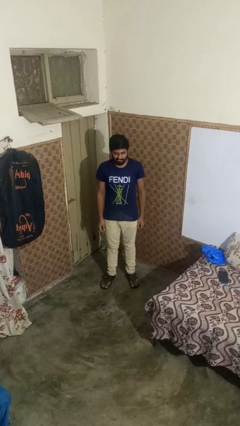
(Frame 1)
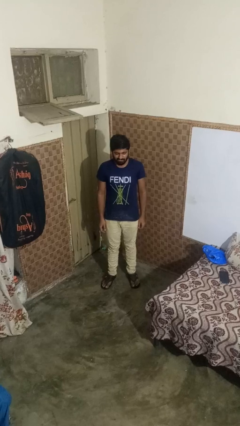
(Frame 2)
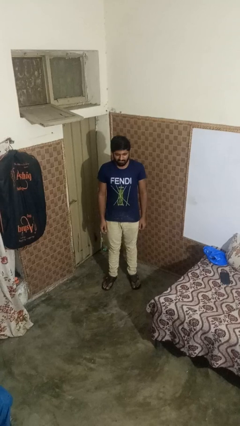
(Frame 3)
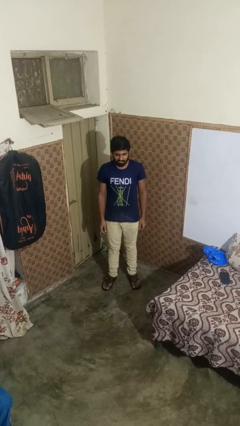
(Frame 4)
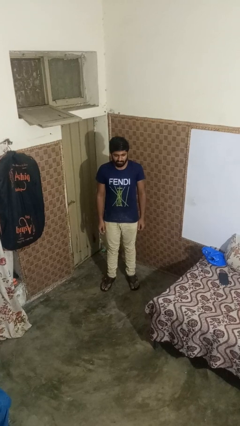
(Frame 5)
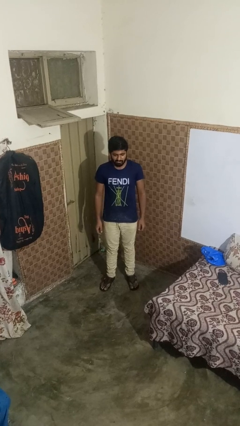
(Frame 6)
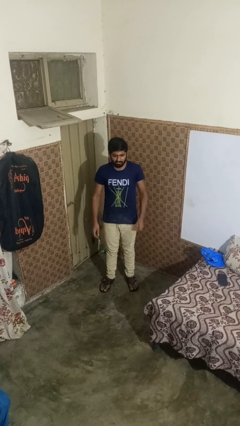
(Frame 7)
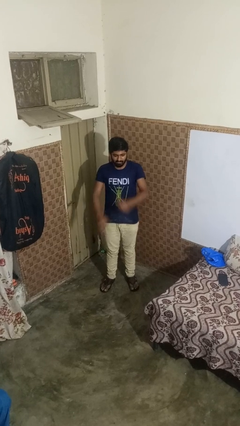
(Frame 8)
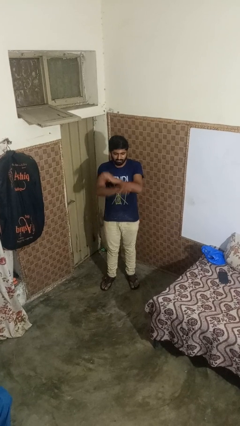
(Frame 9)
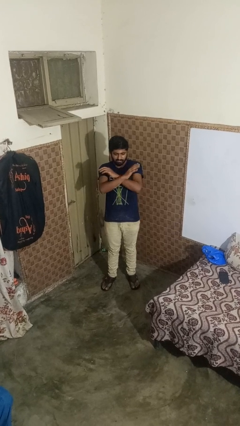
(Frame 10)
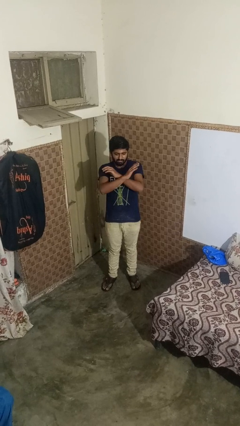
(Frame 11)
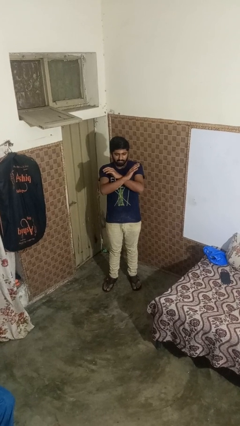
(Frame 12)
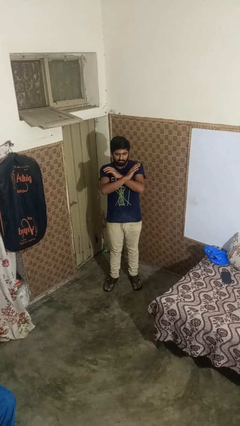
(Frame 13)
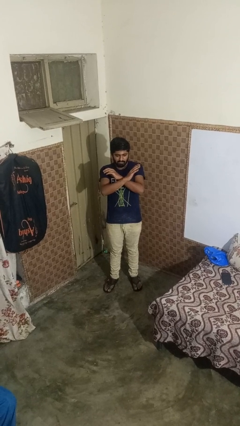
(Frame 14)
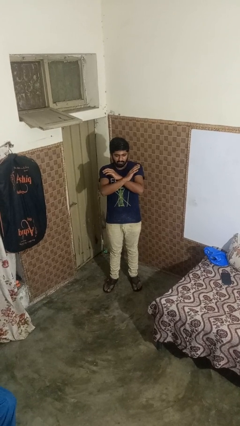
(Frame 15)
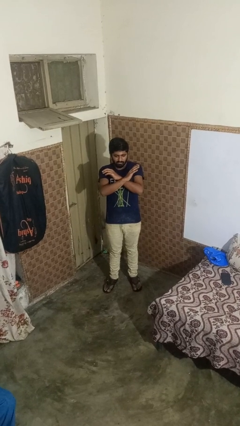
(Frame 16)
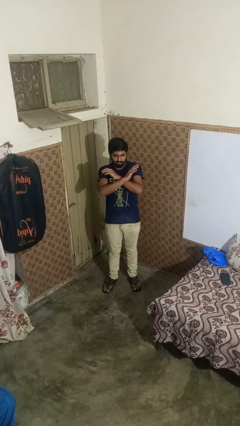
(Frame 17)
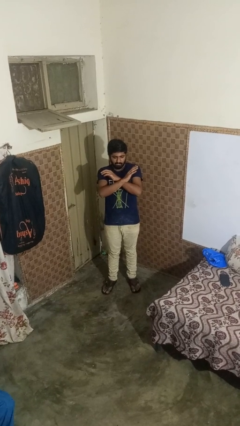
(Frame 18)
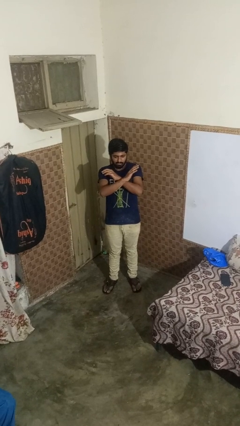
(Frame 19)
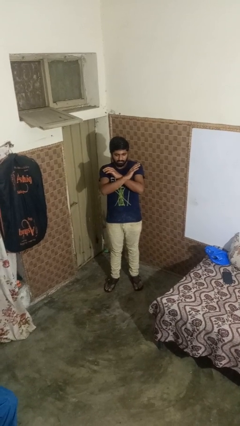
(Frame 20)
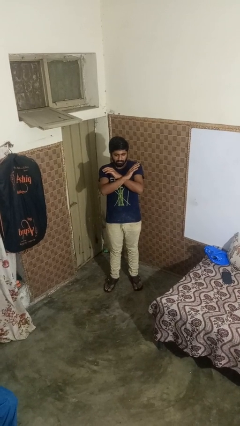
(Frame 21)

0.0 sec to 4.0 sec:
person gestures arms x

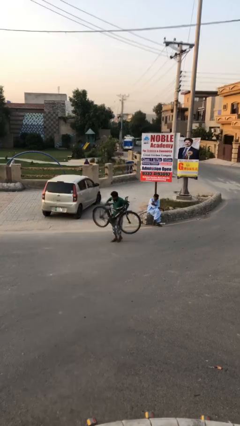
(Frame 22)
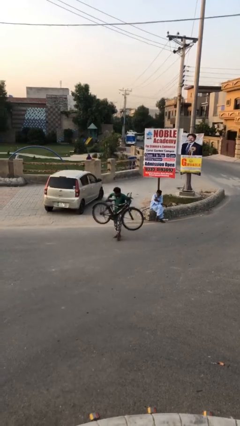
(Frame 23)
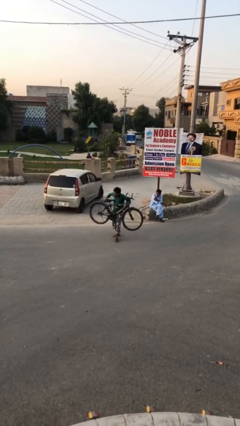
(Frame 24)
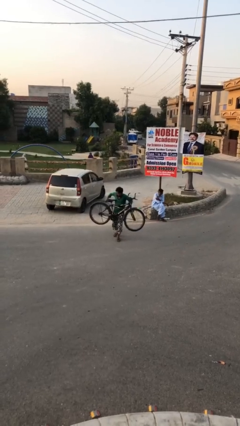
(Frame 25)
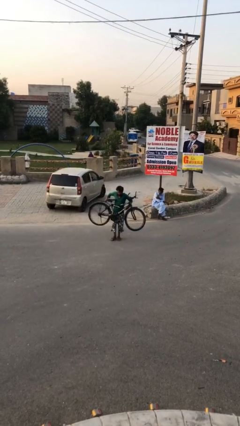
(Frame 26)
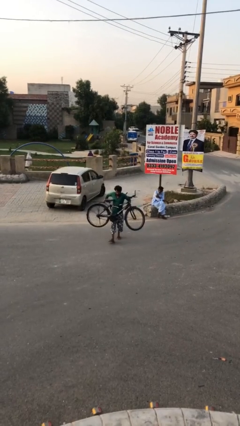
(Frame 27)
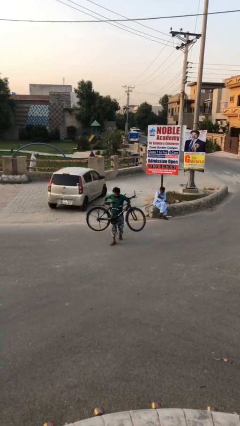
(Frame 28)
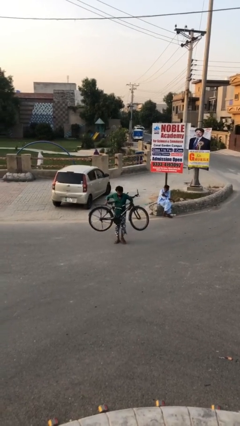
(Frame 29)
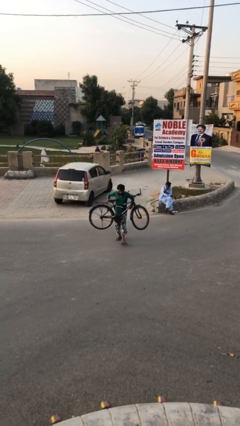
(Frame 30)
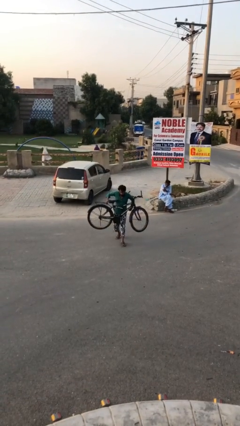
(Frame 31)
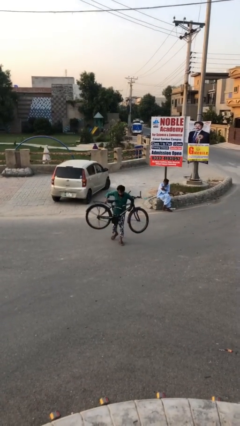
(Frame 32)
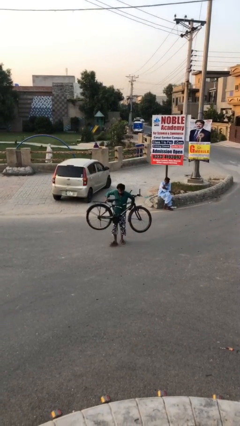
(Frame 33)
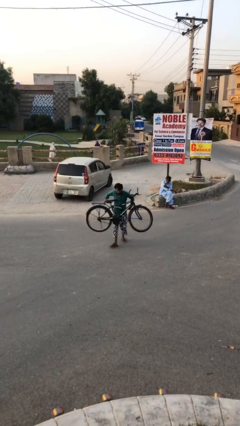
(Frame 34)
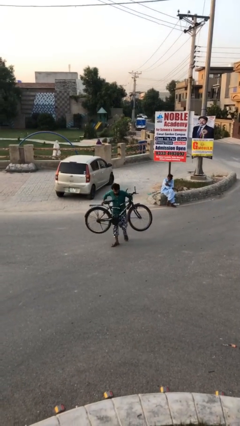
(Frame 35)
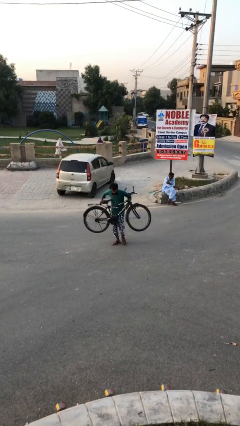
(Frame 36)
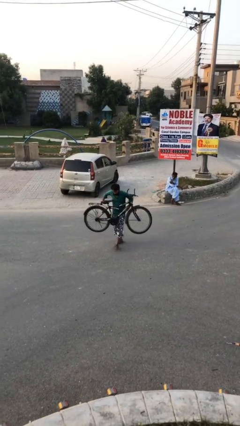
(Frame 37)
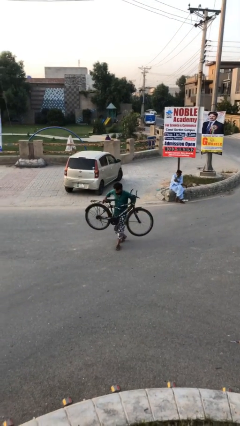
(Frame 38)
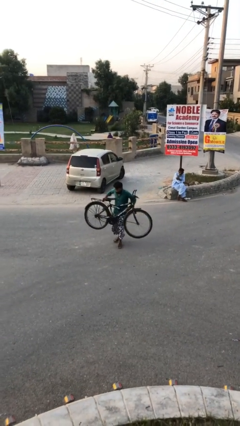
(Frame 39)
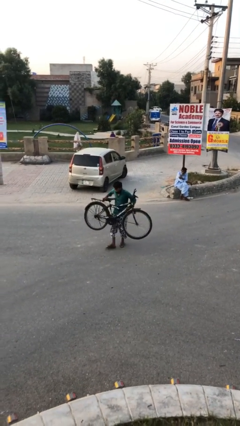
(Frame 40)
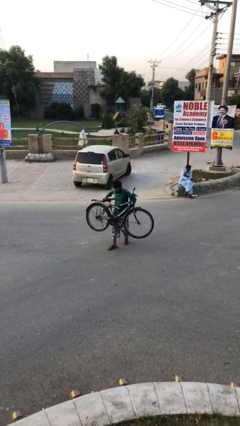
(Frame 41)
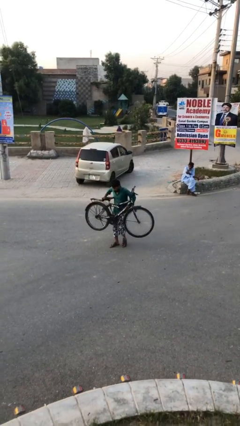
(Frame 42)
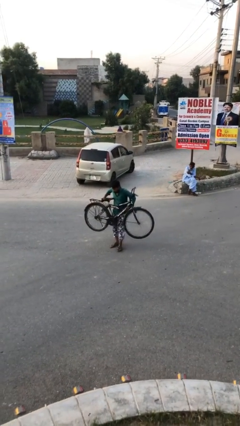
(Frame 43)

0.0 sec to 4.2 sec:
person carries heavy object

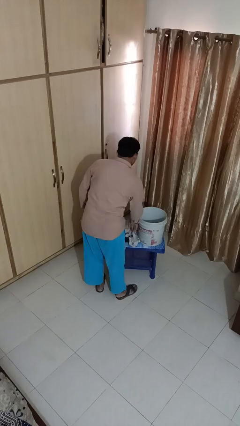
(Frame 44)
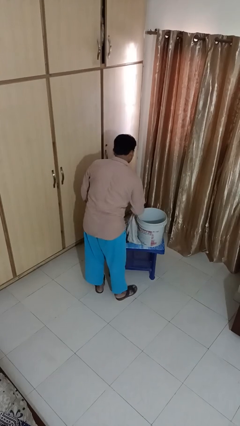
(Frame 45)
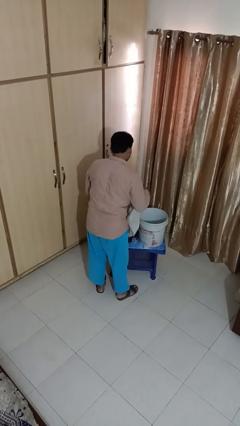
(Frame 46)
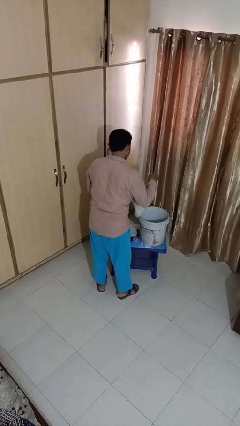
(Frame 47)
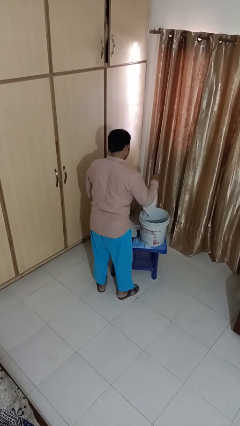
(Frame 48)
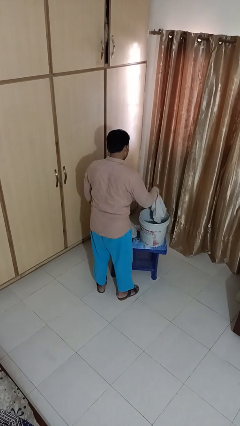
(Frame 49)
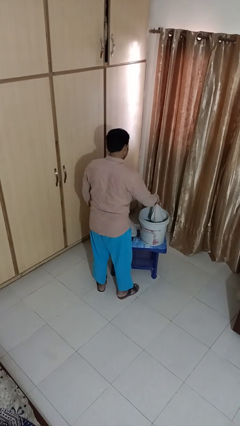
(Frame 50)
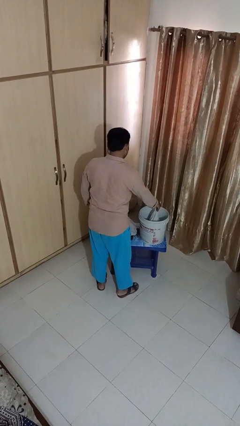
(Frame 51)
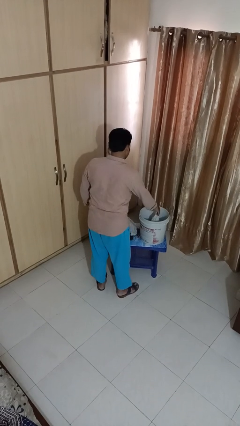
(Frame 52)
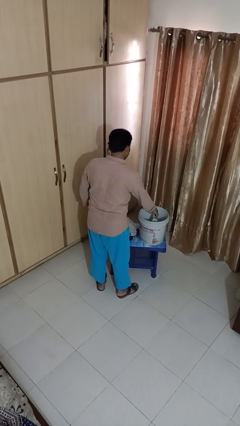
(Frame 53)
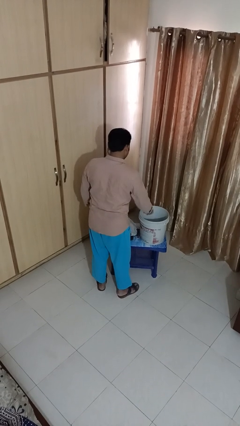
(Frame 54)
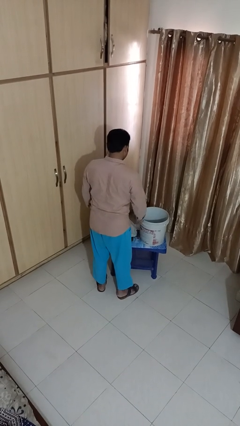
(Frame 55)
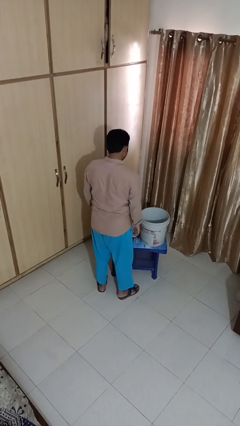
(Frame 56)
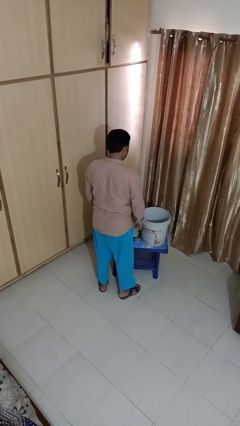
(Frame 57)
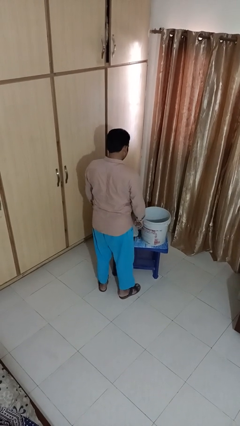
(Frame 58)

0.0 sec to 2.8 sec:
person puts object into basket

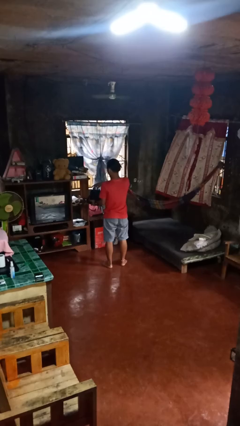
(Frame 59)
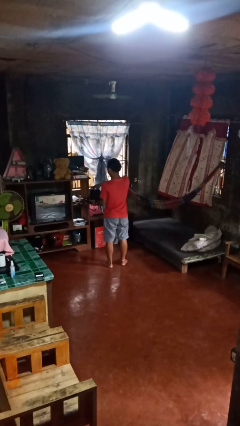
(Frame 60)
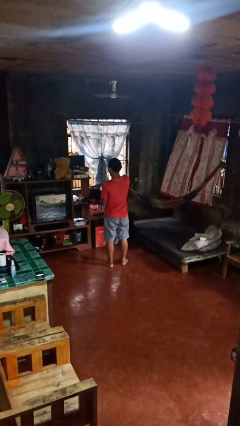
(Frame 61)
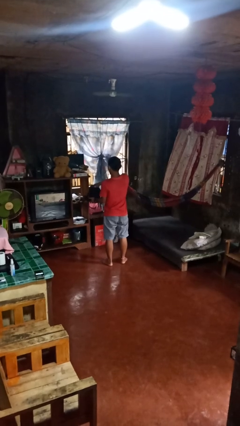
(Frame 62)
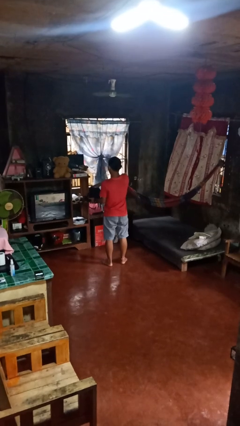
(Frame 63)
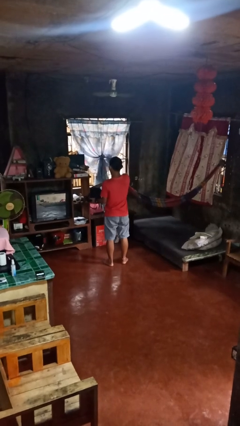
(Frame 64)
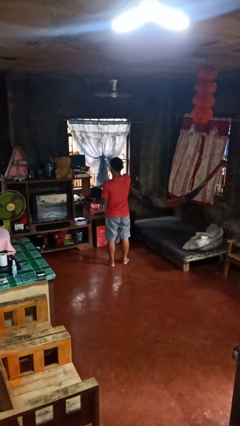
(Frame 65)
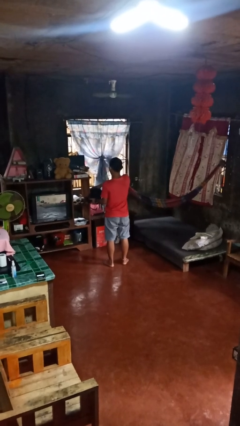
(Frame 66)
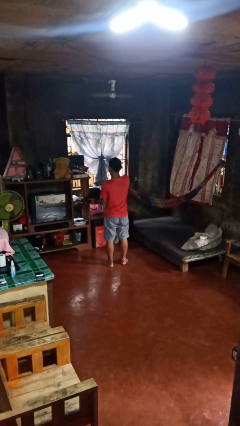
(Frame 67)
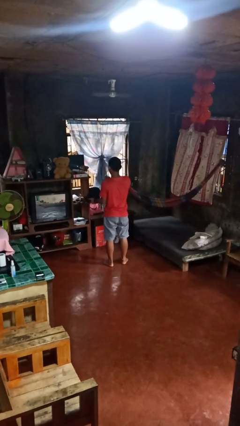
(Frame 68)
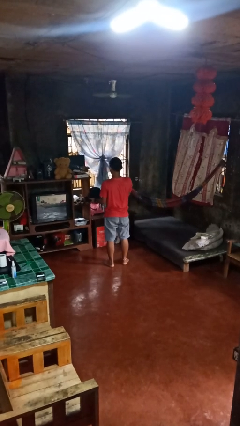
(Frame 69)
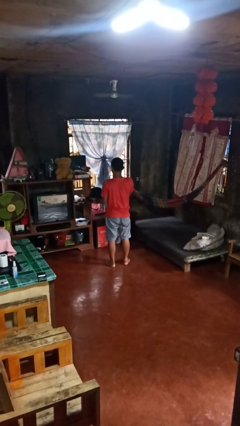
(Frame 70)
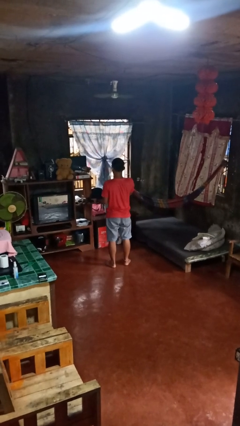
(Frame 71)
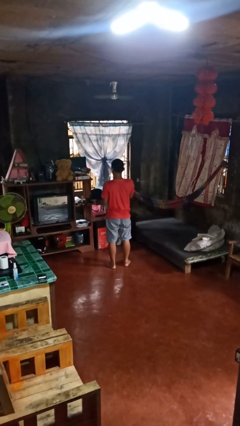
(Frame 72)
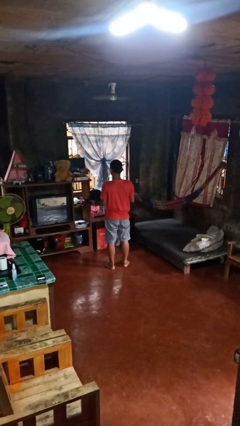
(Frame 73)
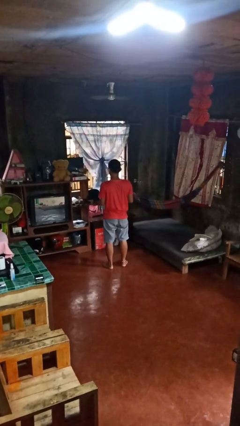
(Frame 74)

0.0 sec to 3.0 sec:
person eats snack from bag

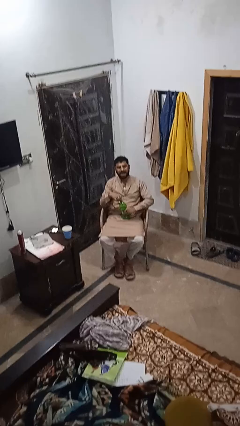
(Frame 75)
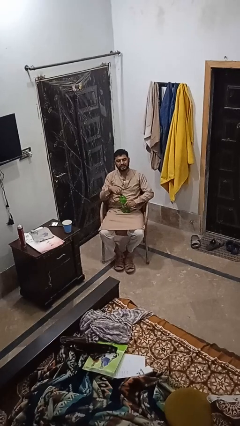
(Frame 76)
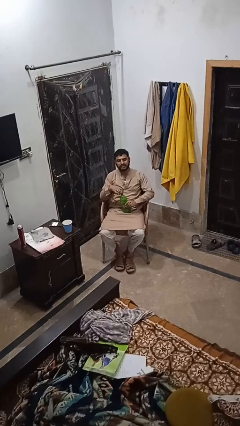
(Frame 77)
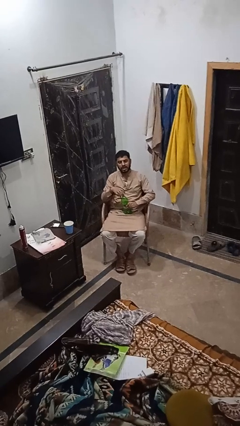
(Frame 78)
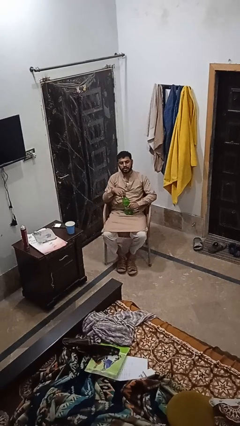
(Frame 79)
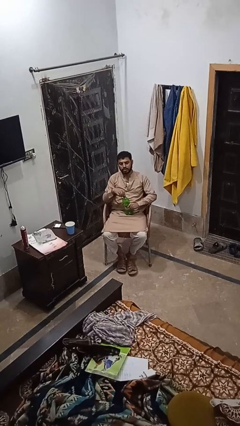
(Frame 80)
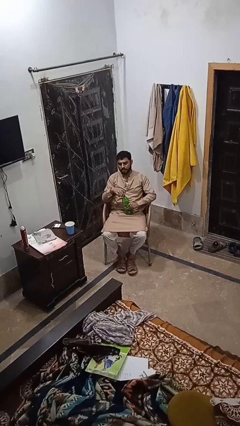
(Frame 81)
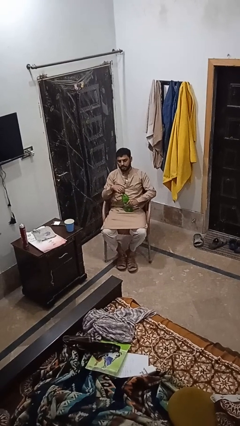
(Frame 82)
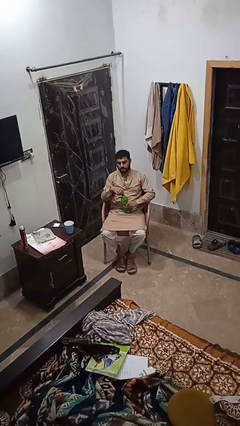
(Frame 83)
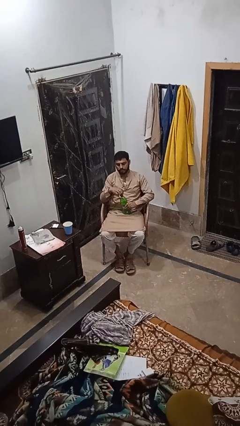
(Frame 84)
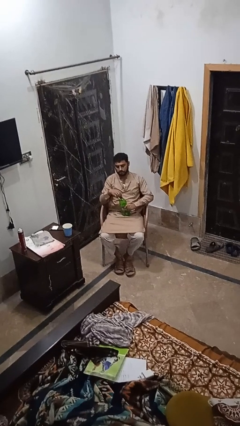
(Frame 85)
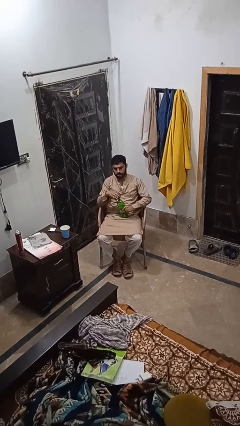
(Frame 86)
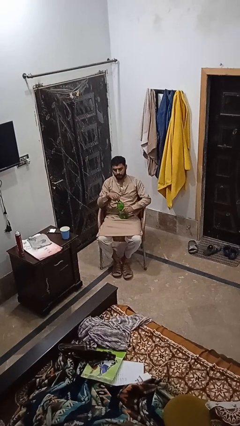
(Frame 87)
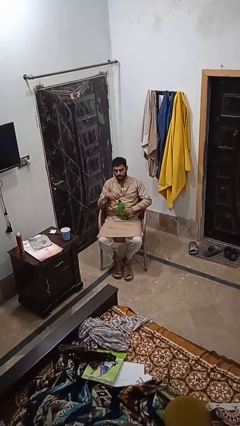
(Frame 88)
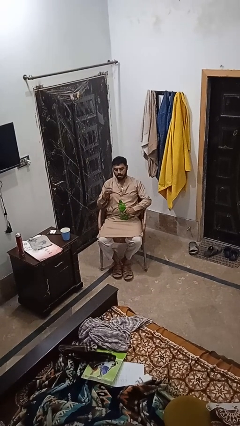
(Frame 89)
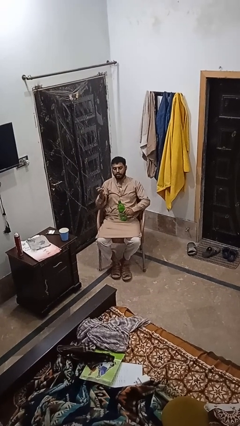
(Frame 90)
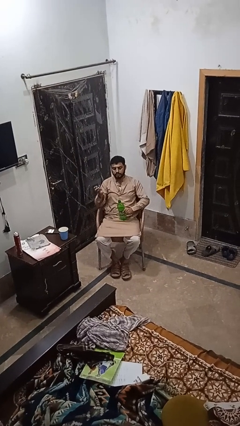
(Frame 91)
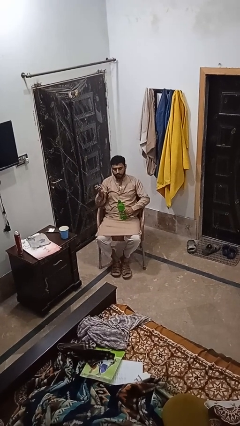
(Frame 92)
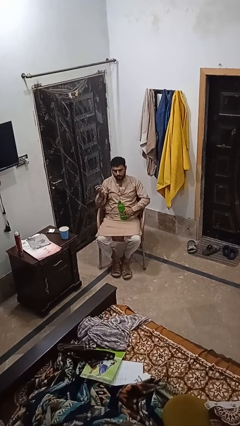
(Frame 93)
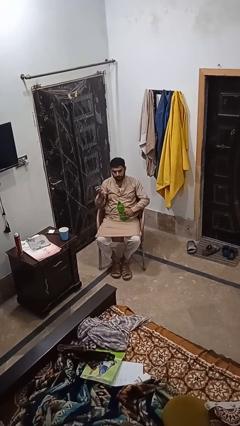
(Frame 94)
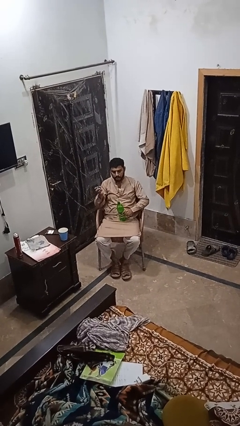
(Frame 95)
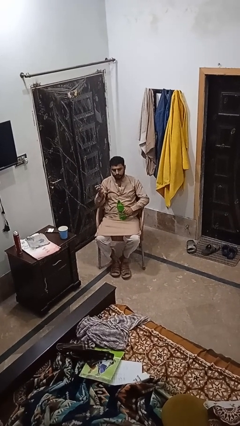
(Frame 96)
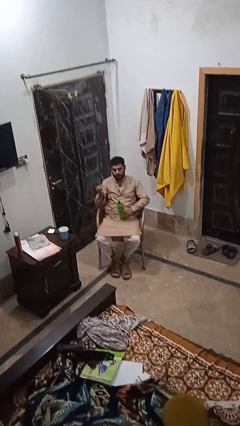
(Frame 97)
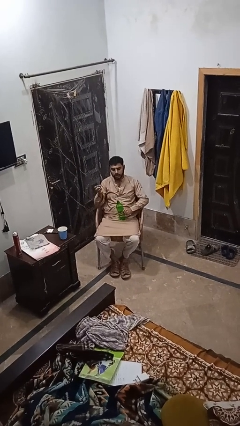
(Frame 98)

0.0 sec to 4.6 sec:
person unscrews lid from bottle
